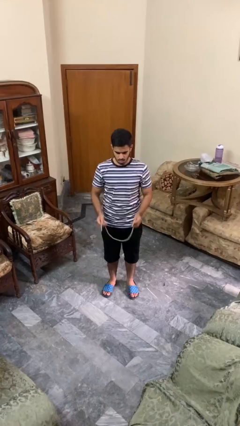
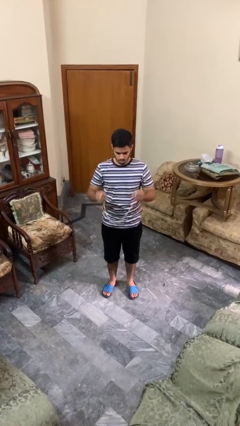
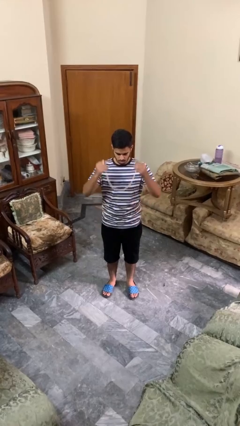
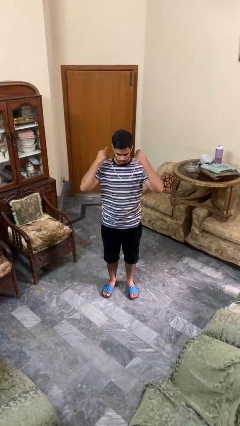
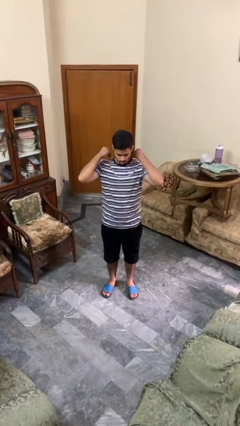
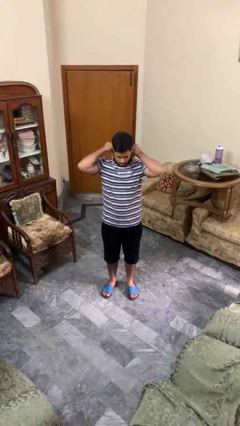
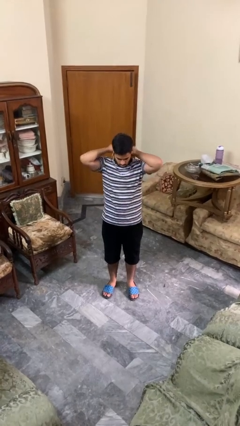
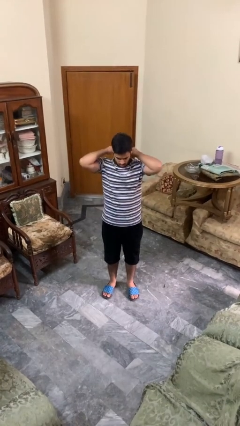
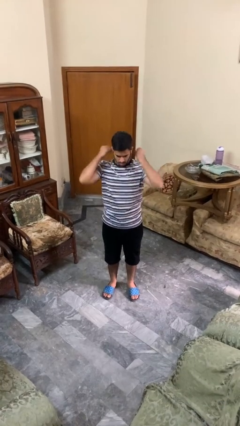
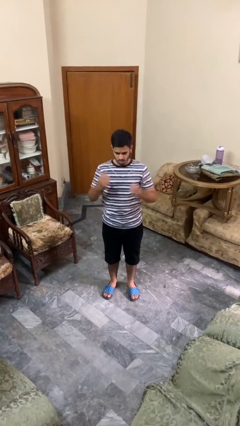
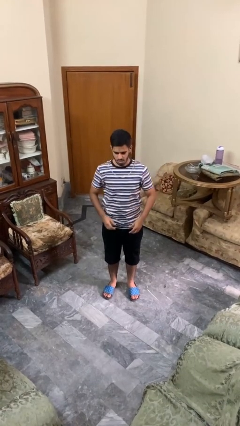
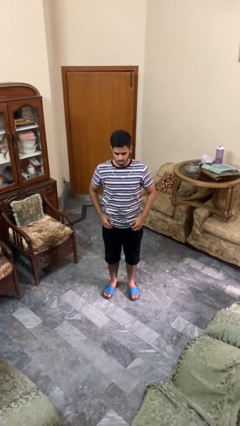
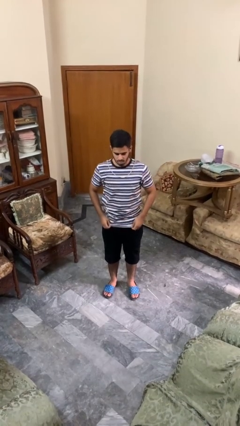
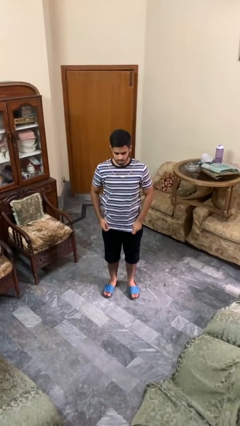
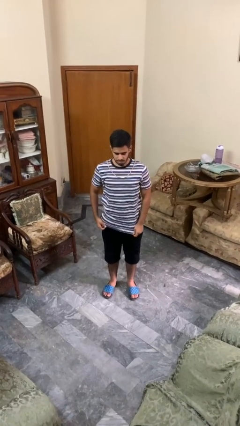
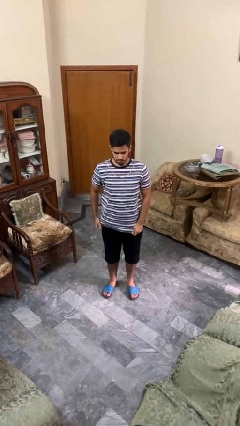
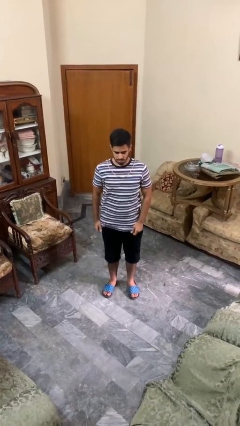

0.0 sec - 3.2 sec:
person puts on necklace

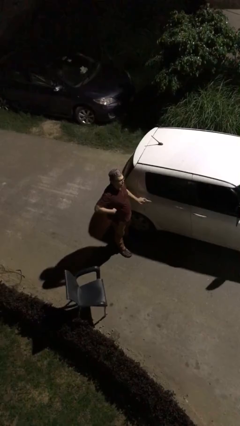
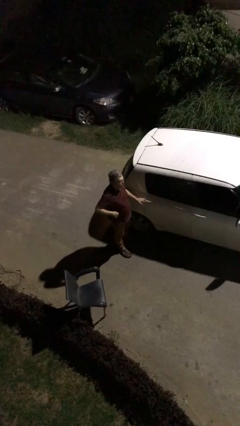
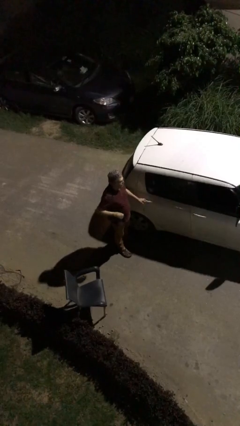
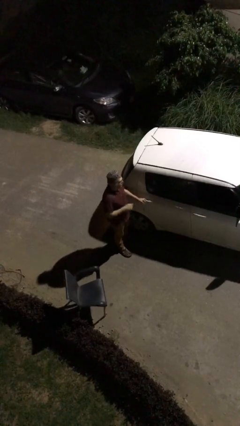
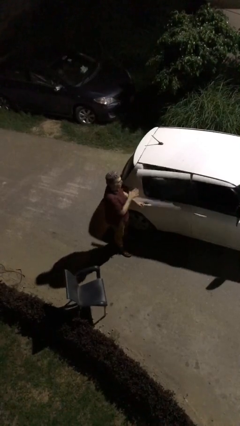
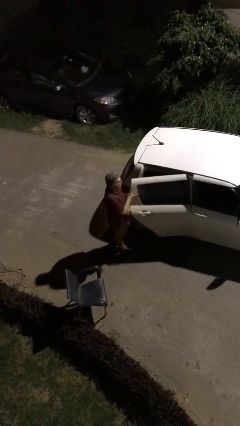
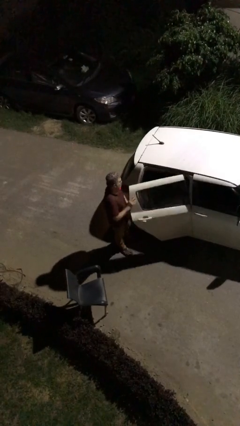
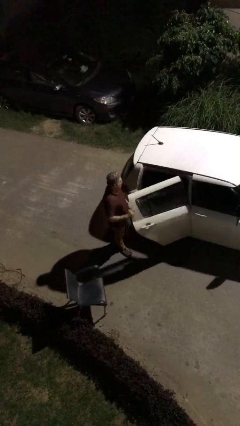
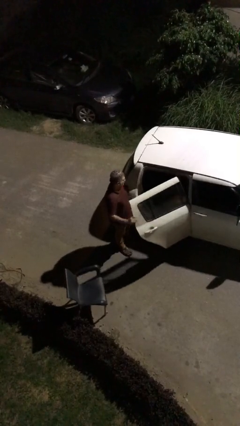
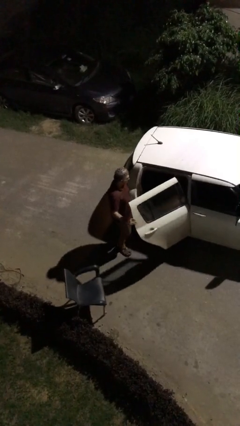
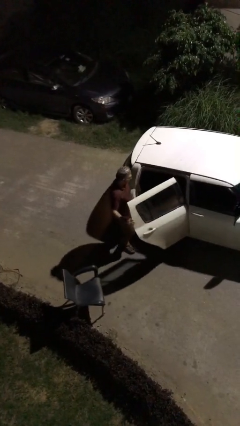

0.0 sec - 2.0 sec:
person opens car door

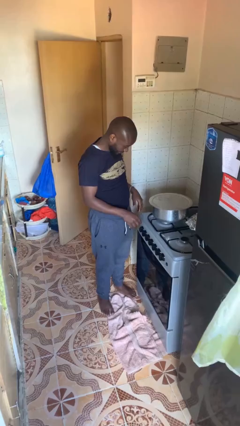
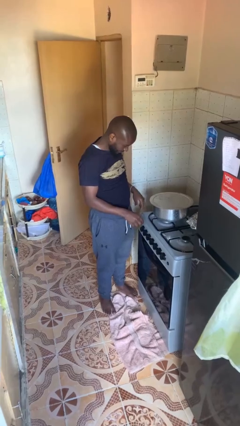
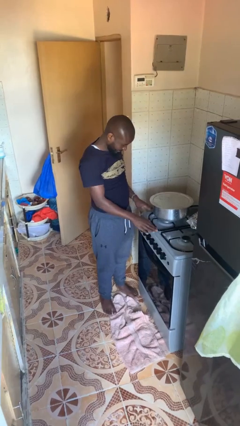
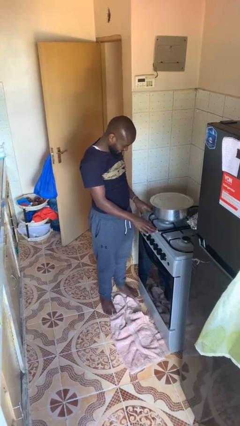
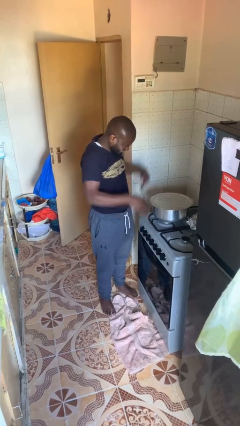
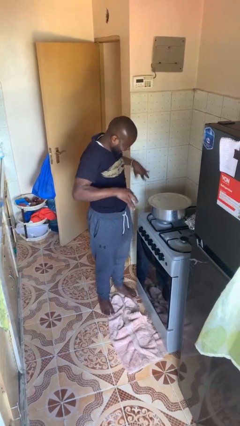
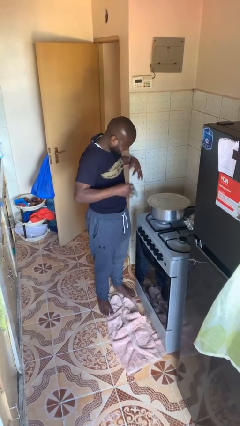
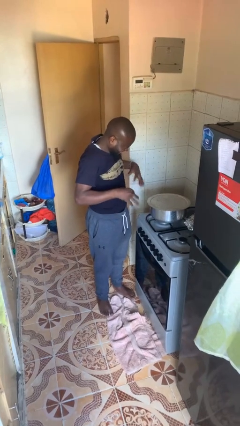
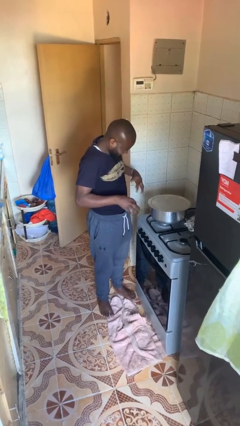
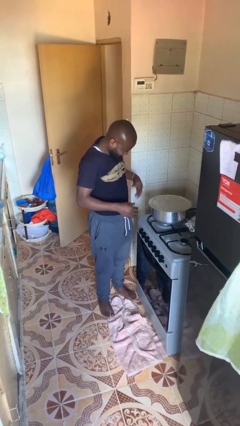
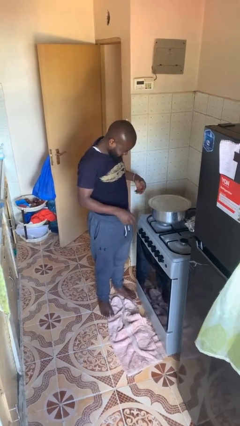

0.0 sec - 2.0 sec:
person burns hand

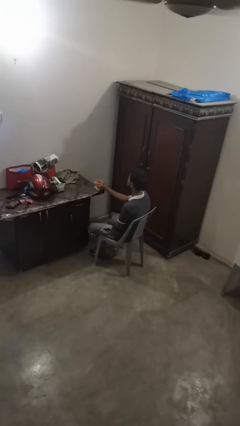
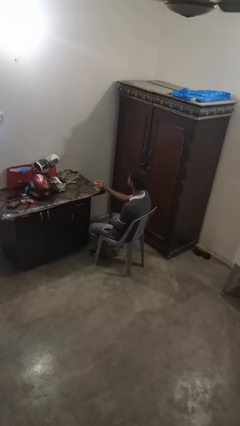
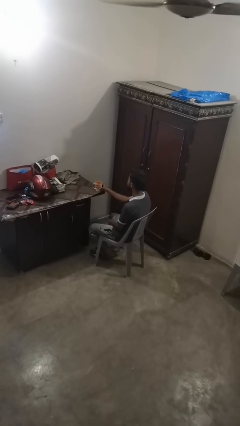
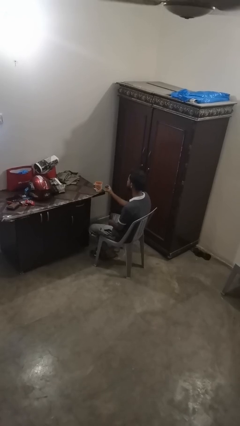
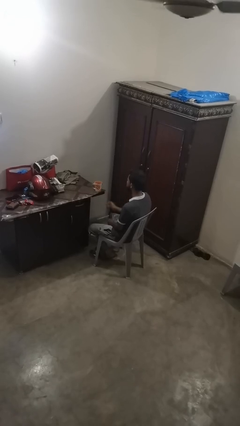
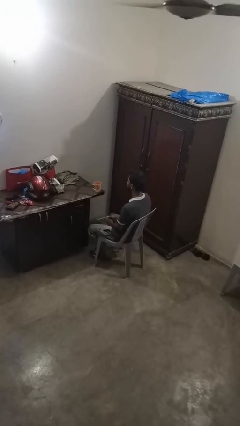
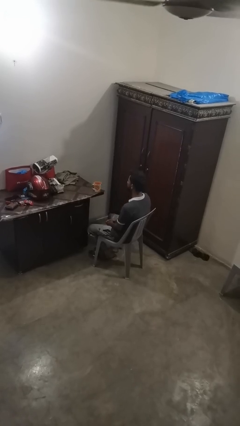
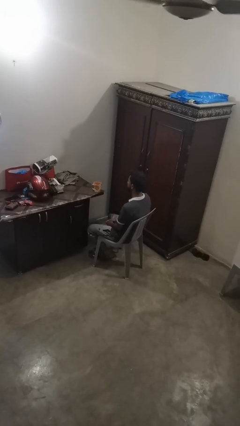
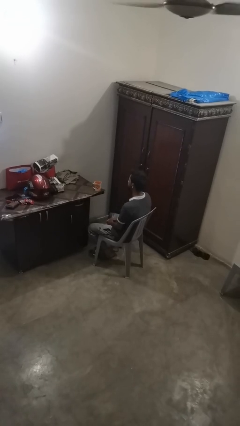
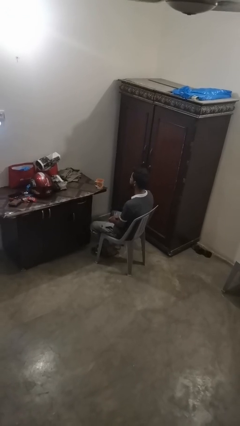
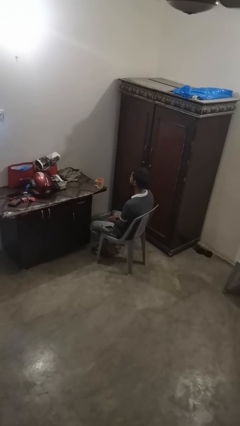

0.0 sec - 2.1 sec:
person puts down object on table

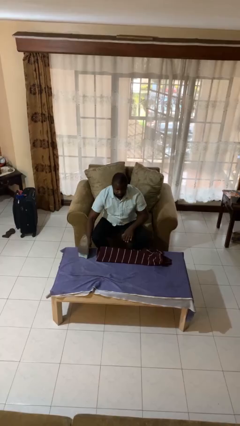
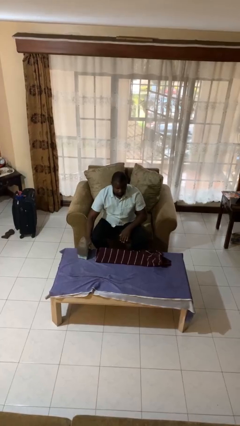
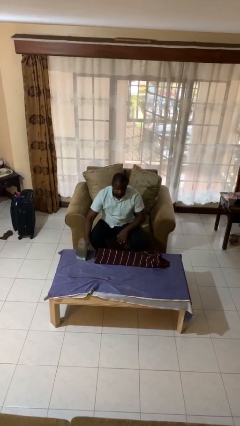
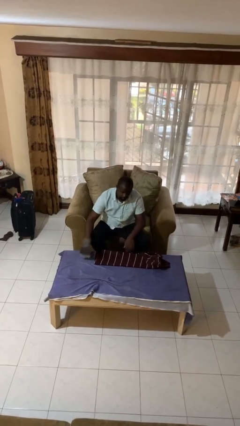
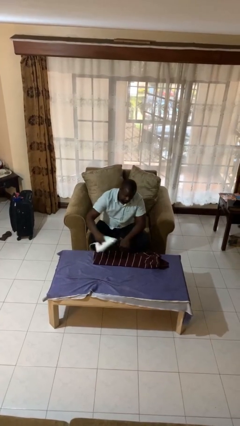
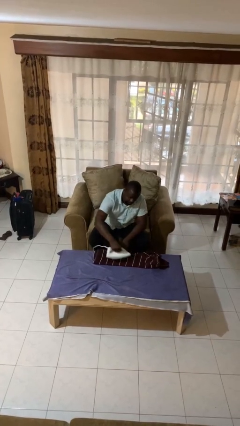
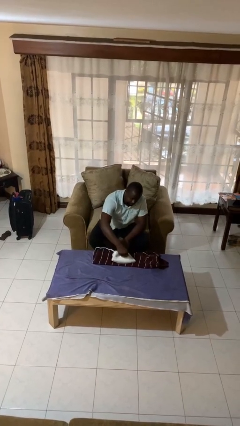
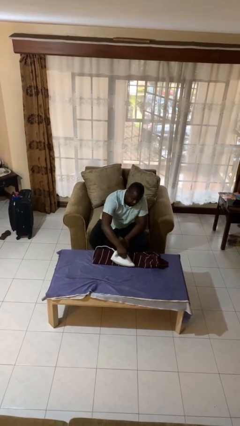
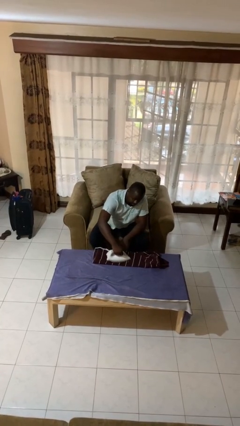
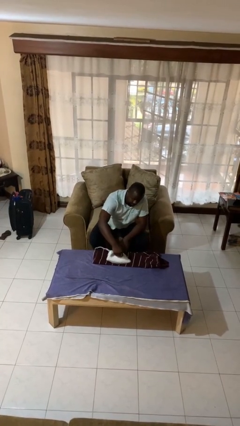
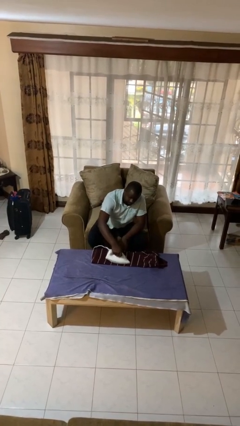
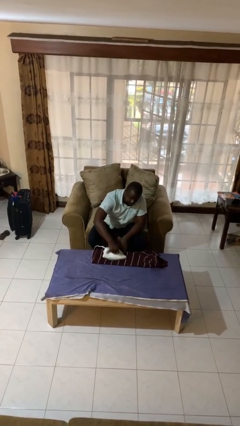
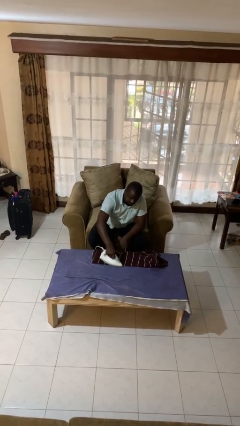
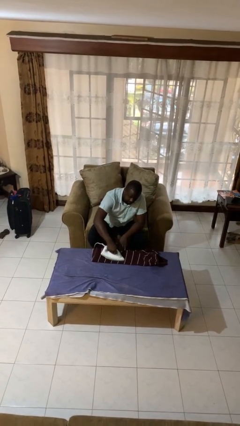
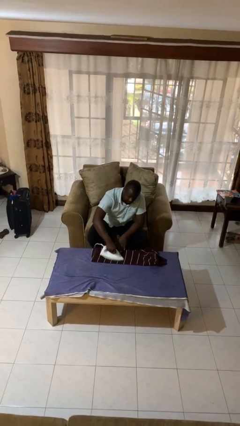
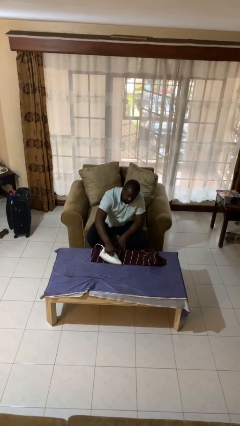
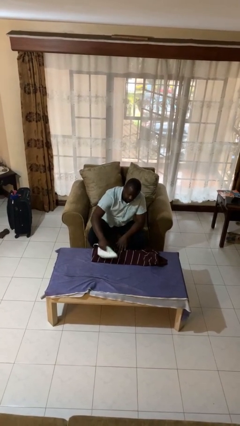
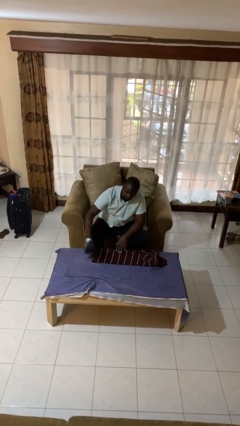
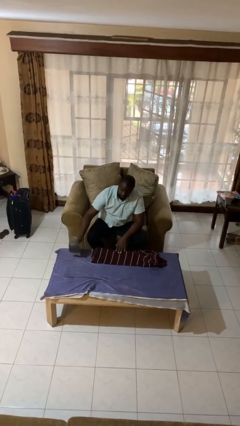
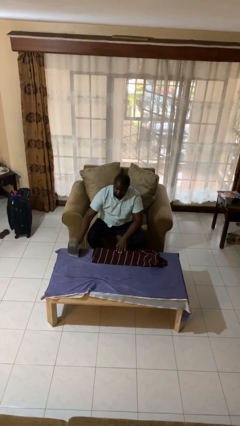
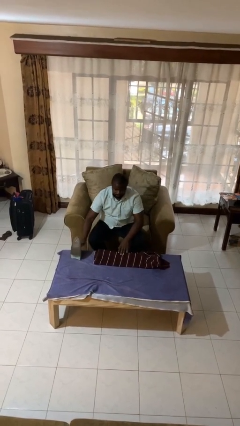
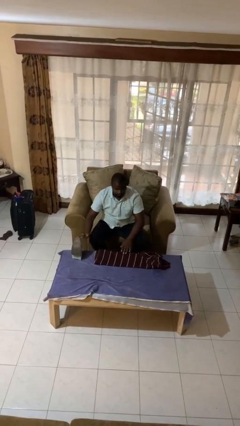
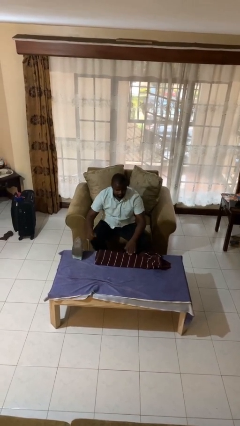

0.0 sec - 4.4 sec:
person irons clothes

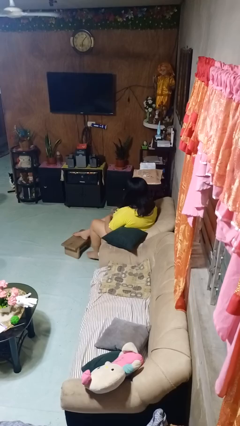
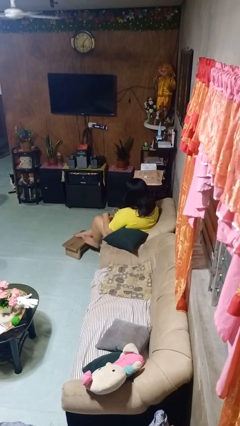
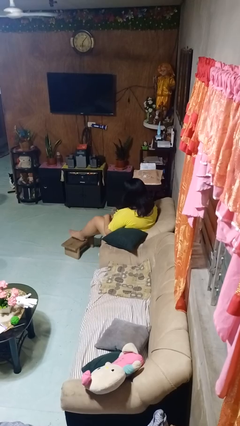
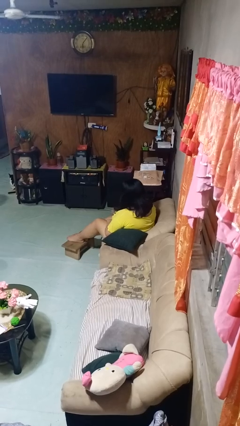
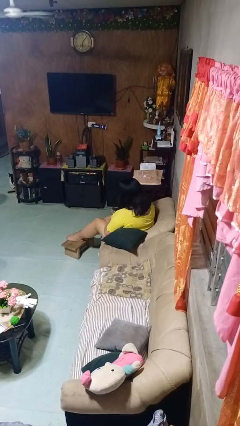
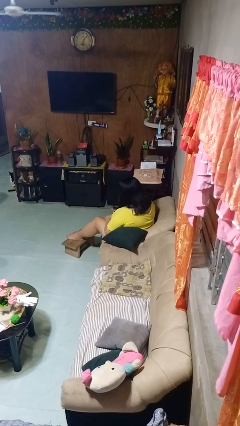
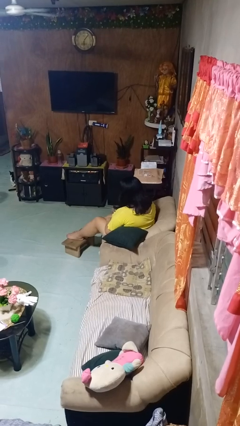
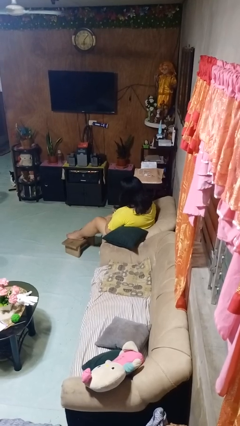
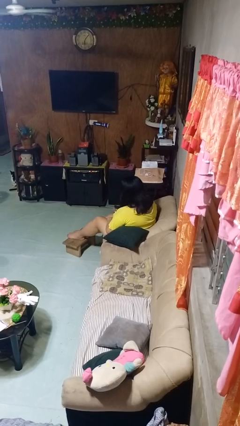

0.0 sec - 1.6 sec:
person puts feet up

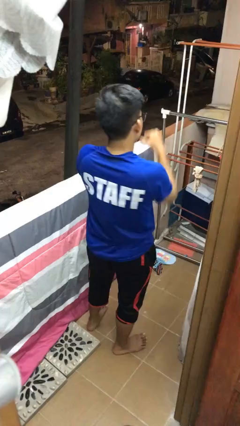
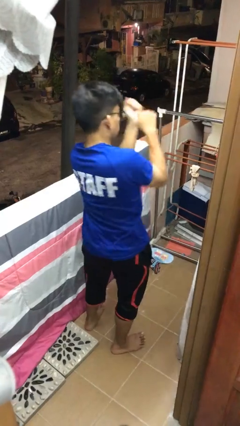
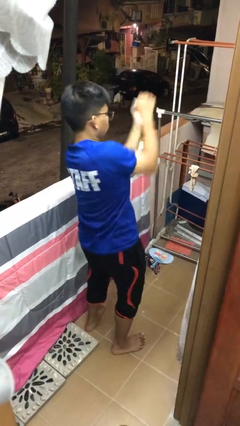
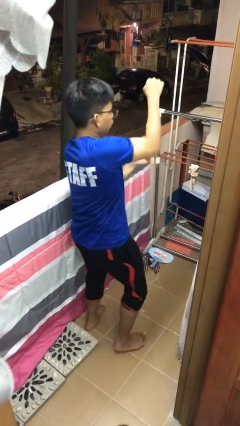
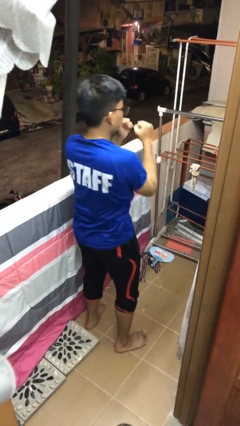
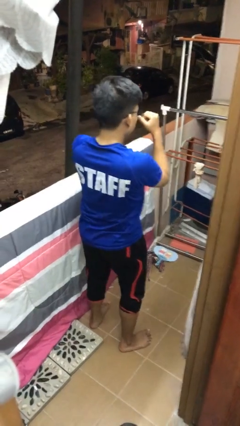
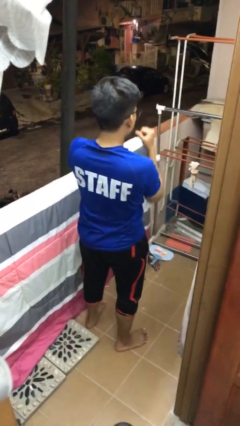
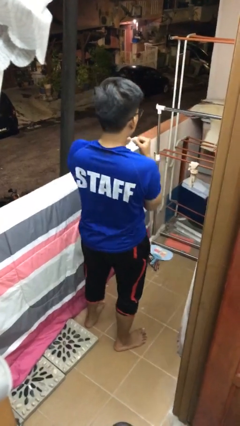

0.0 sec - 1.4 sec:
person punches

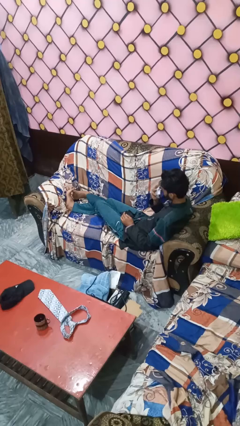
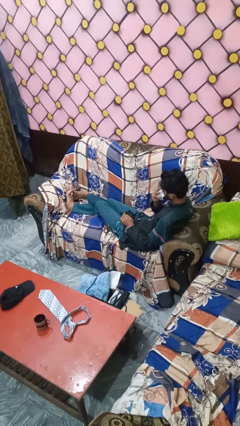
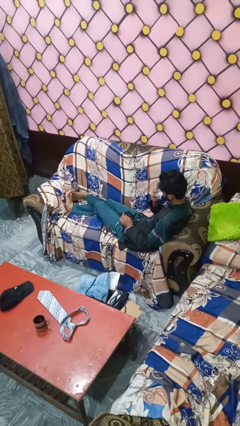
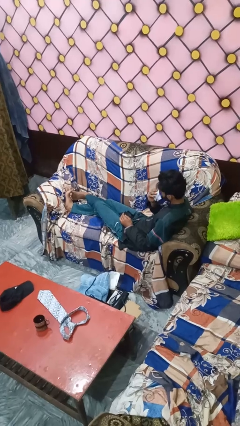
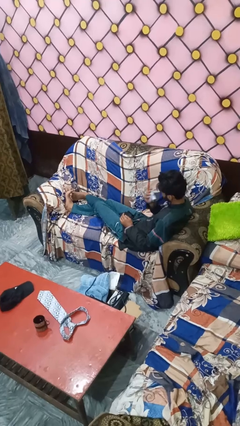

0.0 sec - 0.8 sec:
person blows nose
